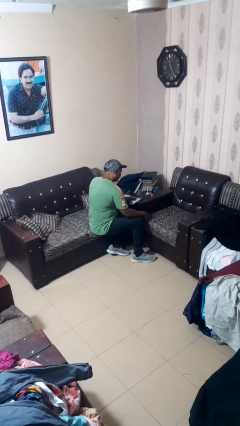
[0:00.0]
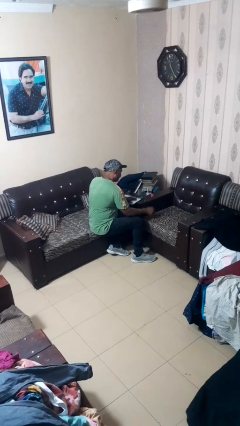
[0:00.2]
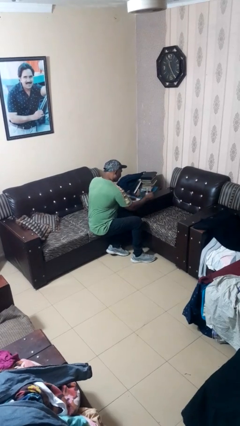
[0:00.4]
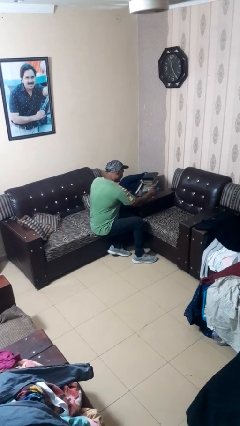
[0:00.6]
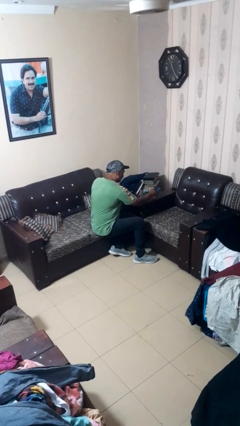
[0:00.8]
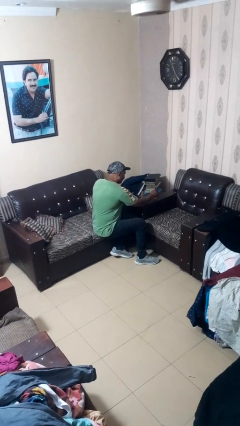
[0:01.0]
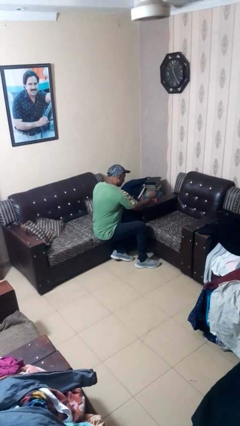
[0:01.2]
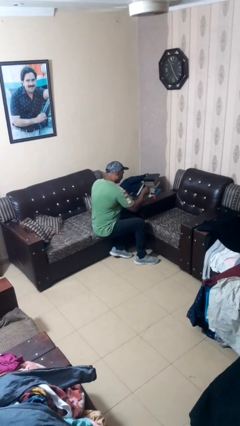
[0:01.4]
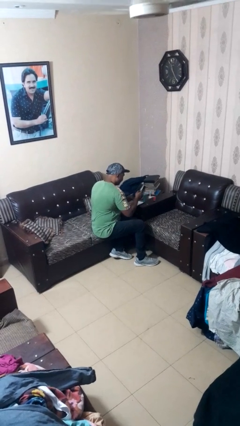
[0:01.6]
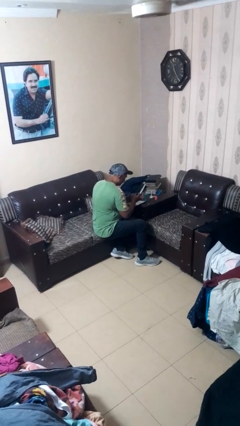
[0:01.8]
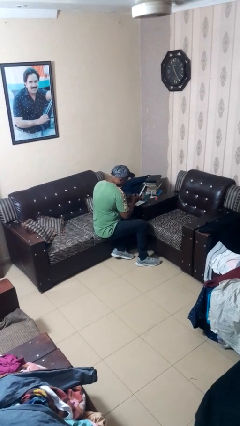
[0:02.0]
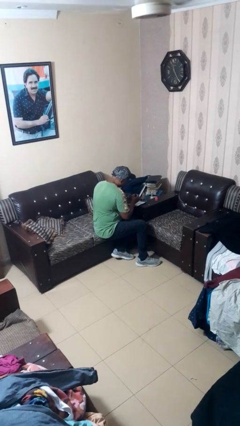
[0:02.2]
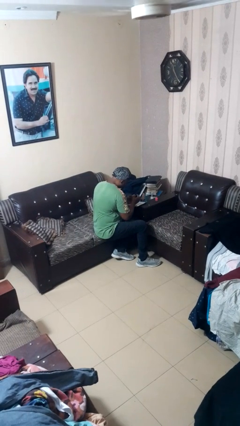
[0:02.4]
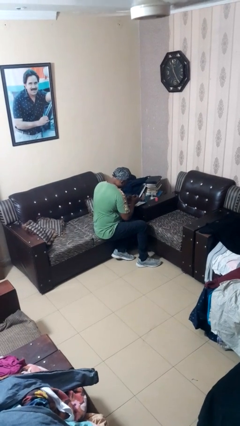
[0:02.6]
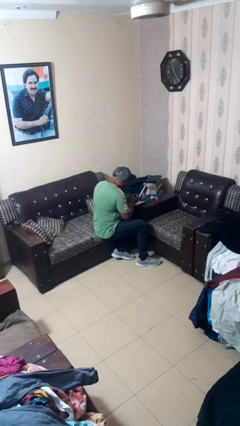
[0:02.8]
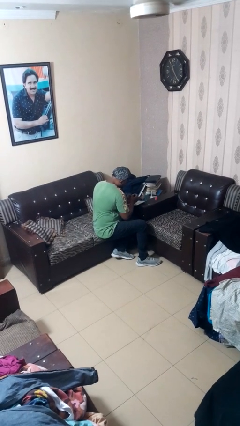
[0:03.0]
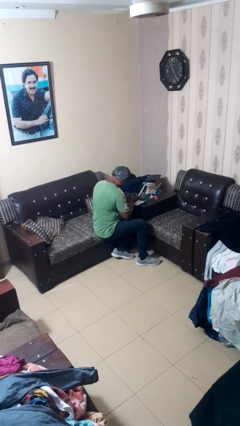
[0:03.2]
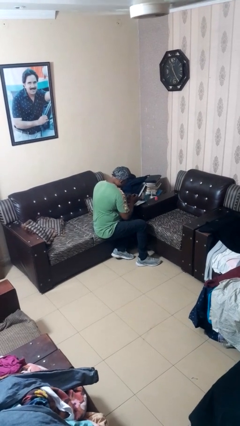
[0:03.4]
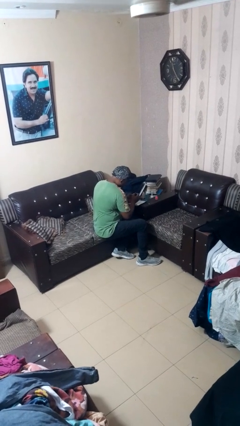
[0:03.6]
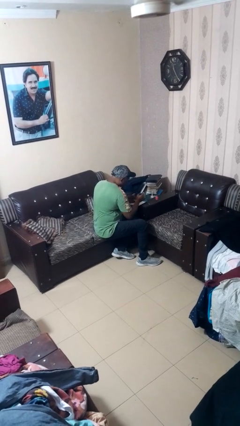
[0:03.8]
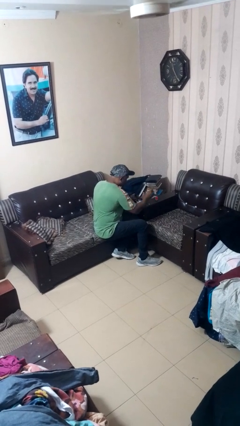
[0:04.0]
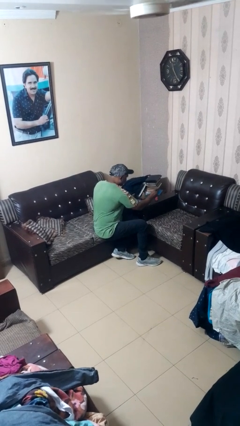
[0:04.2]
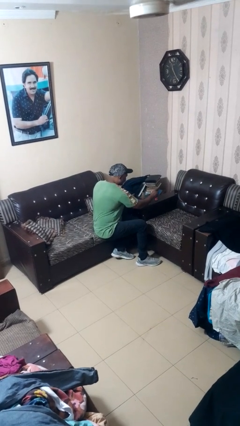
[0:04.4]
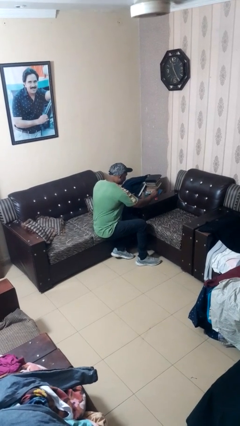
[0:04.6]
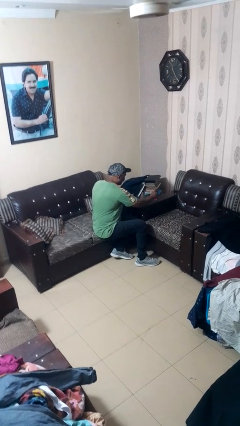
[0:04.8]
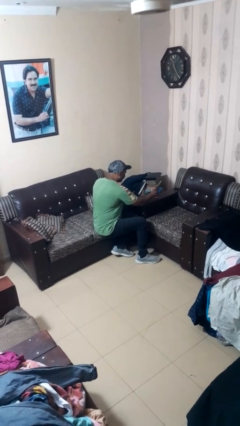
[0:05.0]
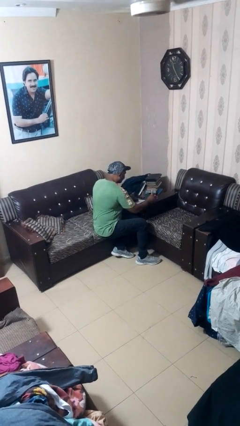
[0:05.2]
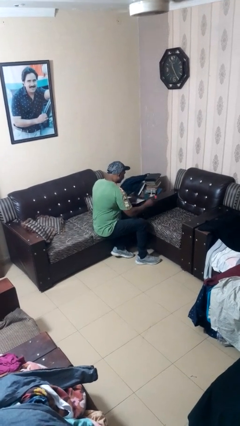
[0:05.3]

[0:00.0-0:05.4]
person paints fingernails

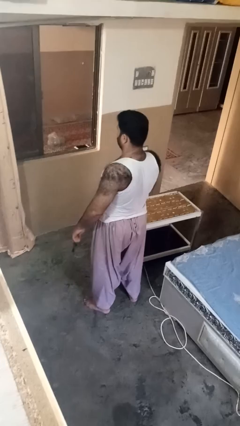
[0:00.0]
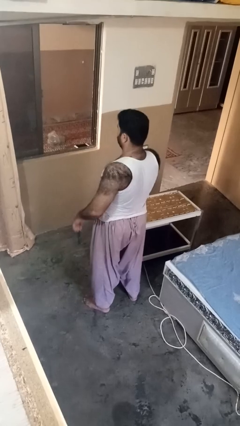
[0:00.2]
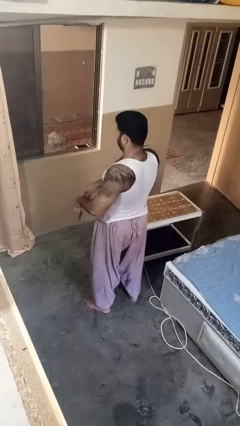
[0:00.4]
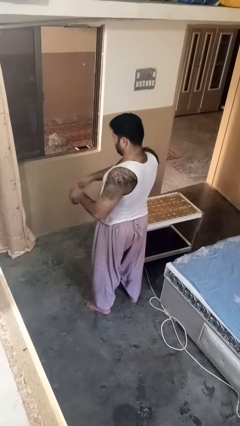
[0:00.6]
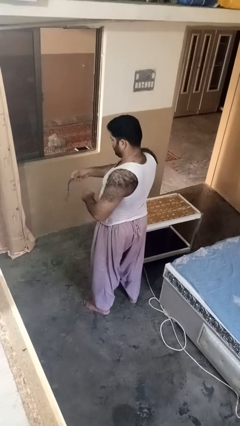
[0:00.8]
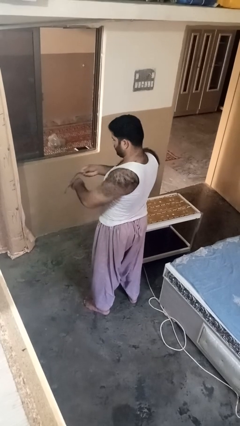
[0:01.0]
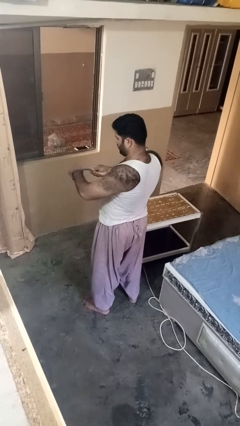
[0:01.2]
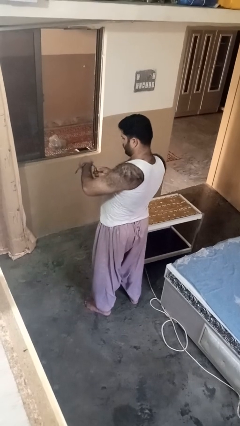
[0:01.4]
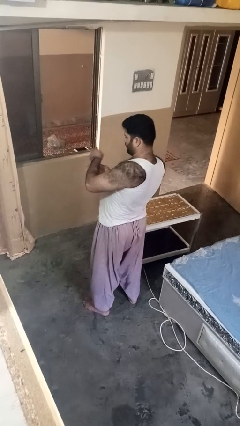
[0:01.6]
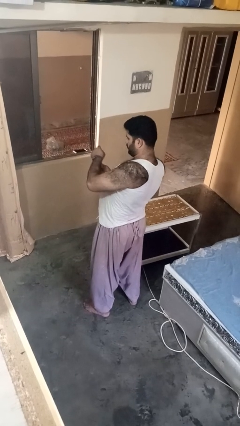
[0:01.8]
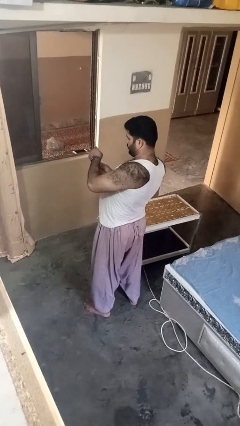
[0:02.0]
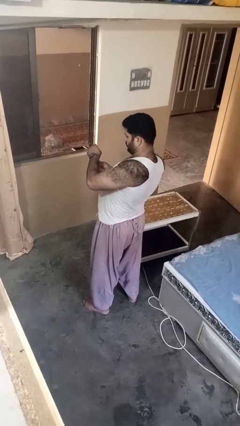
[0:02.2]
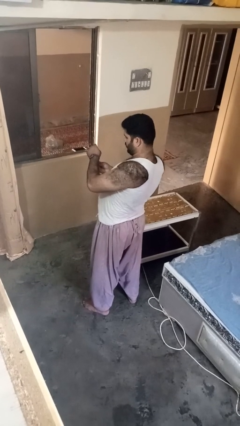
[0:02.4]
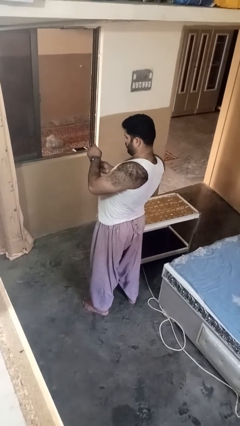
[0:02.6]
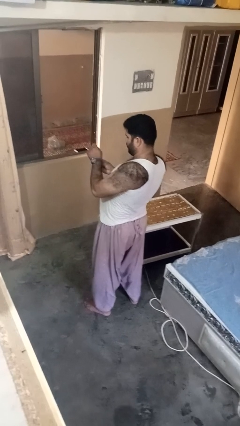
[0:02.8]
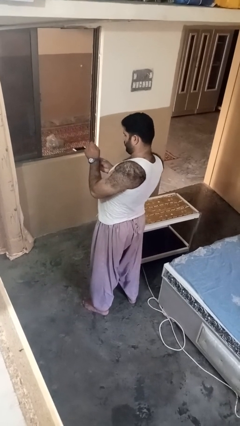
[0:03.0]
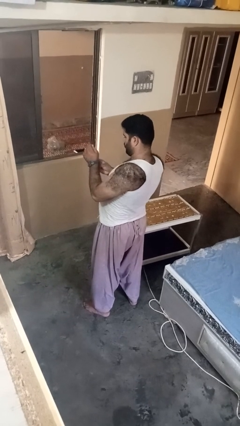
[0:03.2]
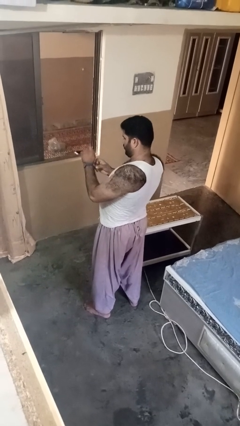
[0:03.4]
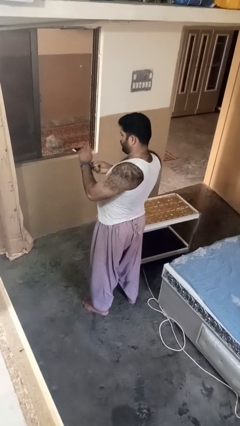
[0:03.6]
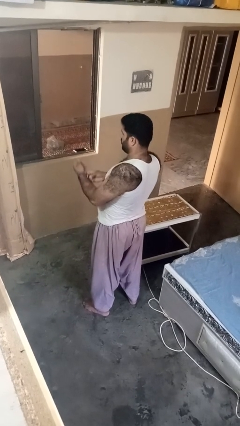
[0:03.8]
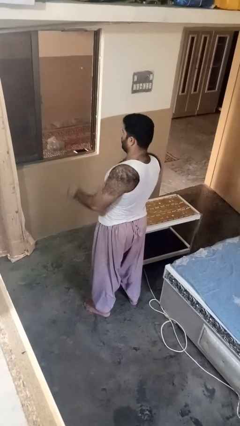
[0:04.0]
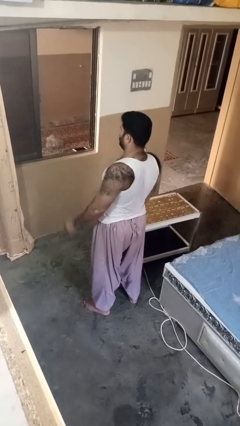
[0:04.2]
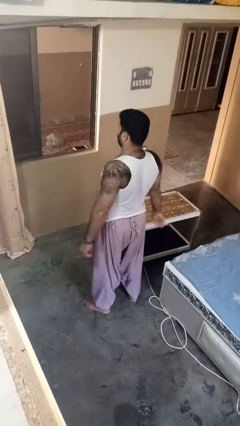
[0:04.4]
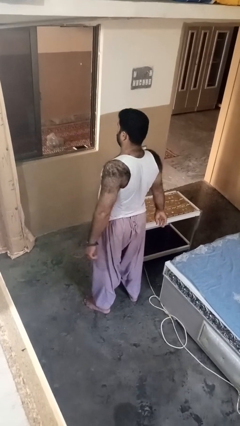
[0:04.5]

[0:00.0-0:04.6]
person puts on wristwatch

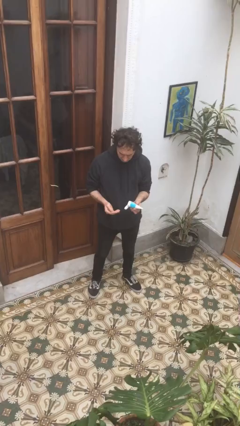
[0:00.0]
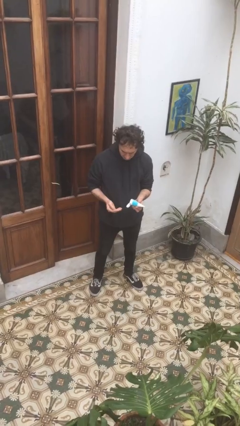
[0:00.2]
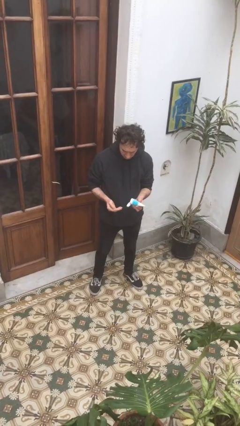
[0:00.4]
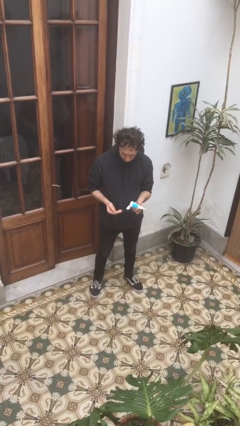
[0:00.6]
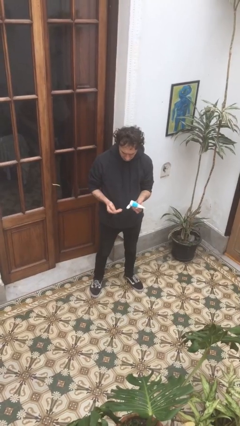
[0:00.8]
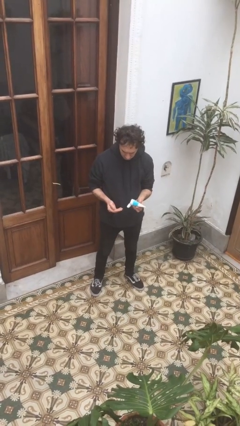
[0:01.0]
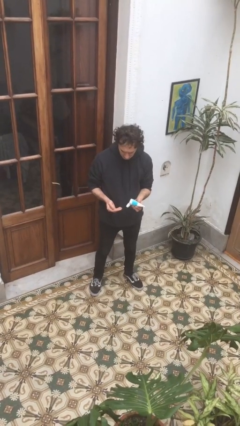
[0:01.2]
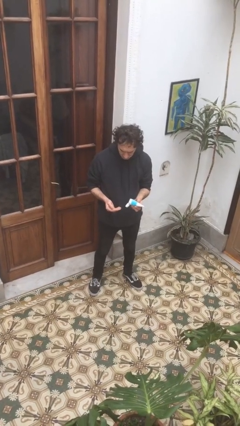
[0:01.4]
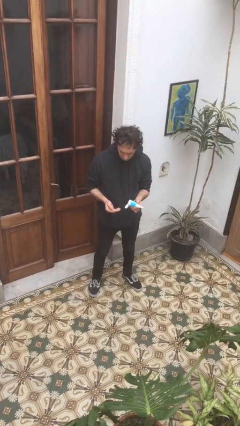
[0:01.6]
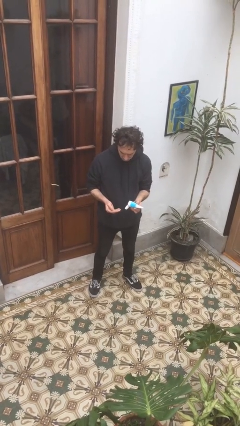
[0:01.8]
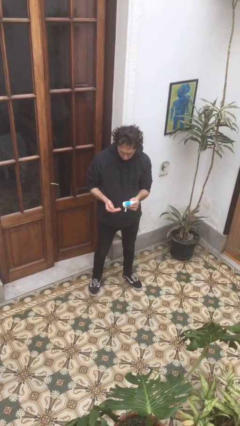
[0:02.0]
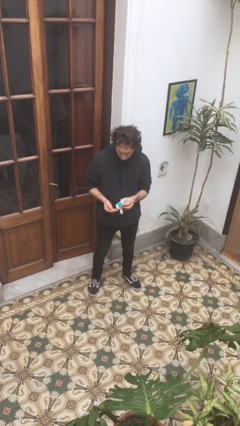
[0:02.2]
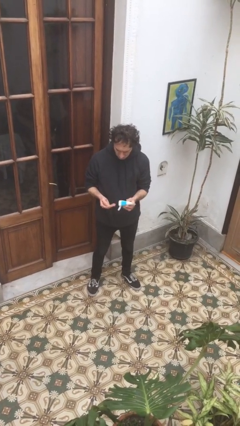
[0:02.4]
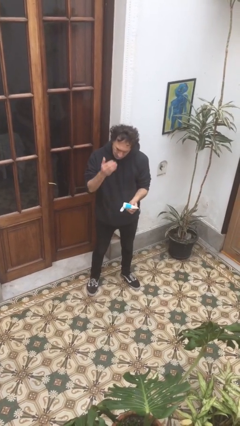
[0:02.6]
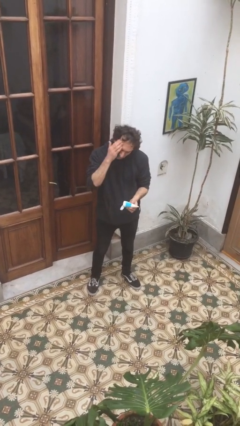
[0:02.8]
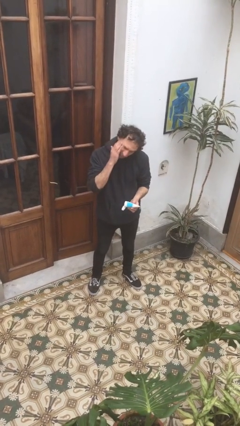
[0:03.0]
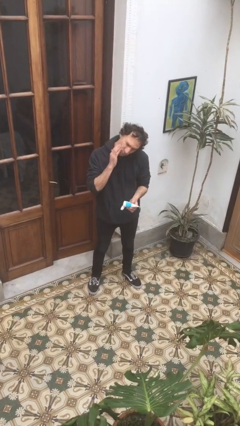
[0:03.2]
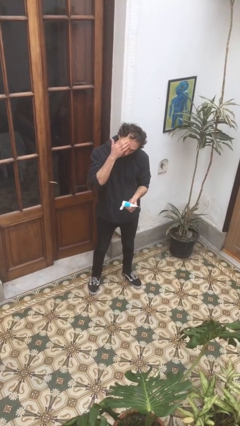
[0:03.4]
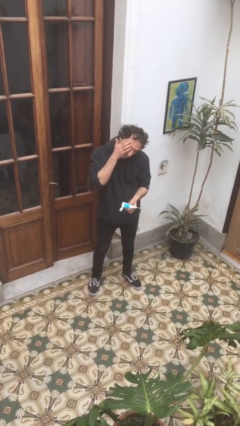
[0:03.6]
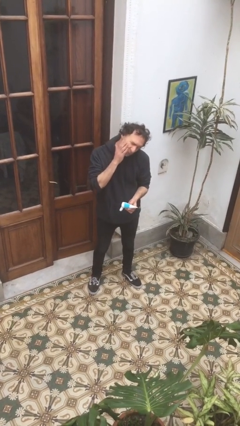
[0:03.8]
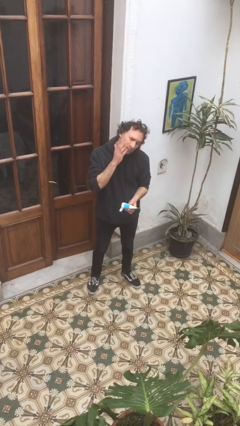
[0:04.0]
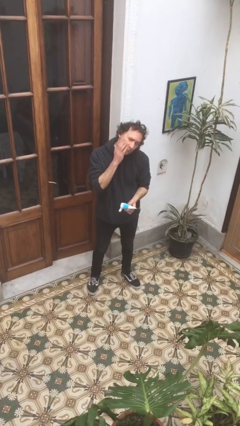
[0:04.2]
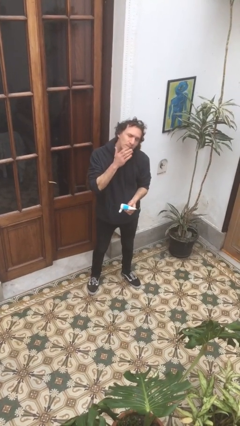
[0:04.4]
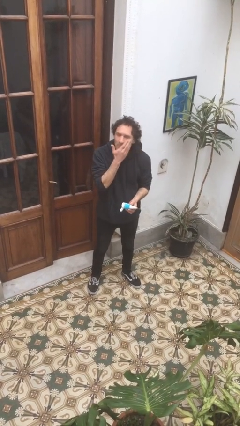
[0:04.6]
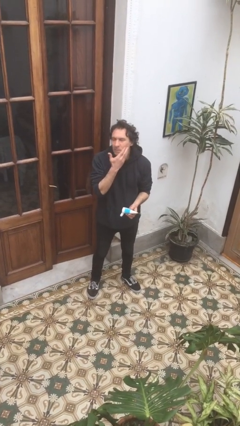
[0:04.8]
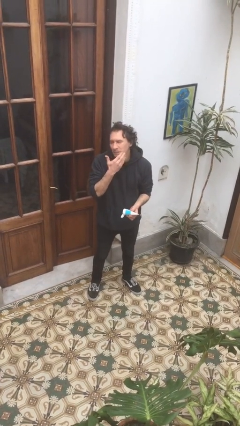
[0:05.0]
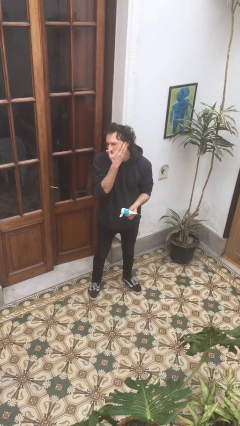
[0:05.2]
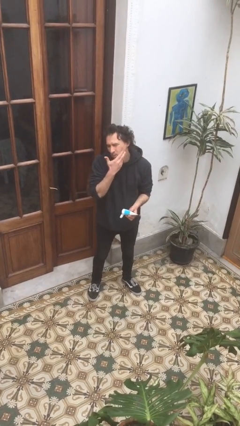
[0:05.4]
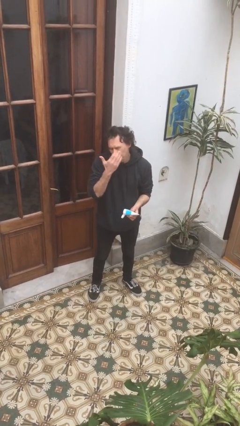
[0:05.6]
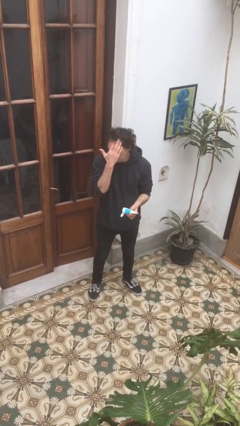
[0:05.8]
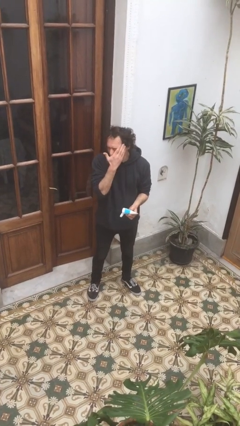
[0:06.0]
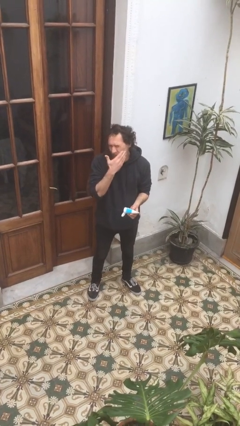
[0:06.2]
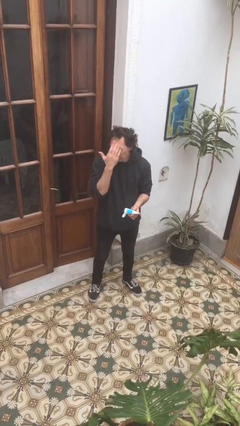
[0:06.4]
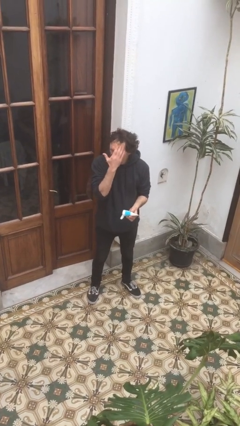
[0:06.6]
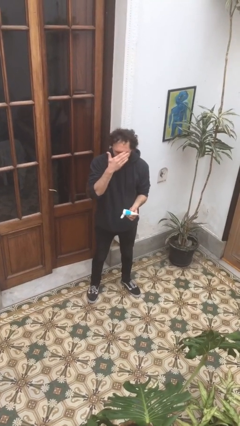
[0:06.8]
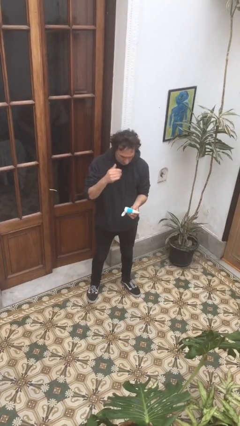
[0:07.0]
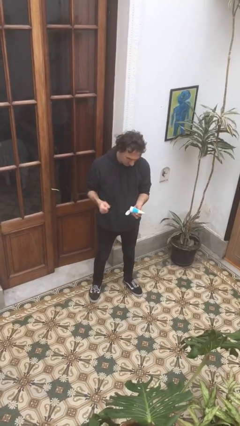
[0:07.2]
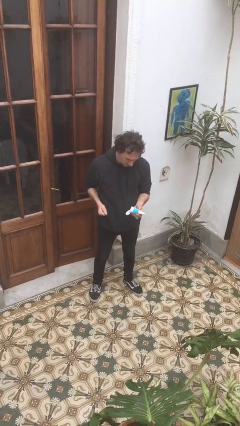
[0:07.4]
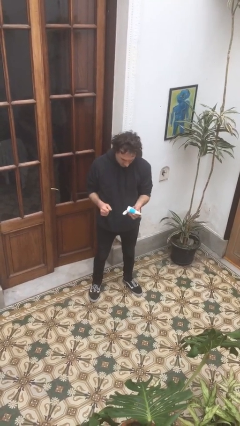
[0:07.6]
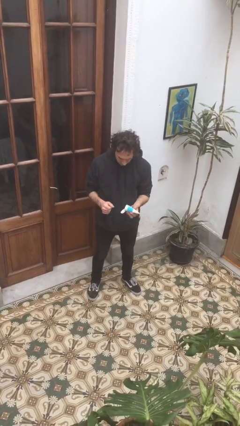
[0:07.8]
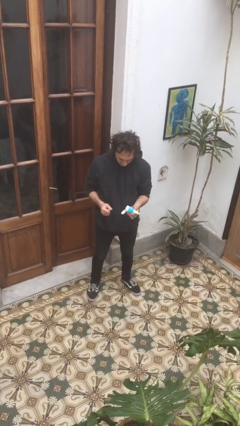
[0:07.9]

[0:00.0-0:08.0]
person applies sunscreen
